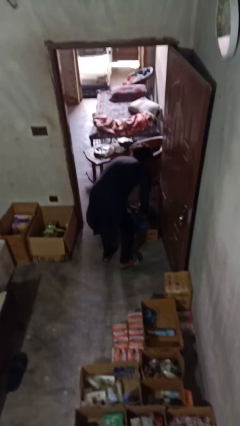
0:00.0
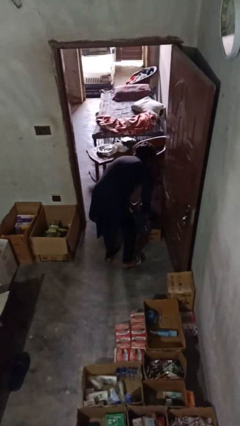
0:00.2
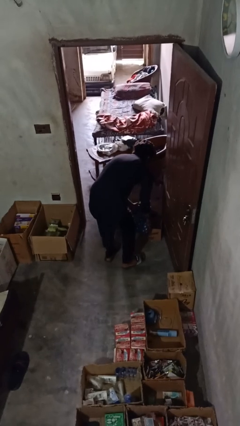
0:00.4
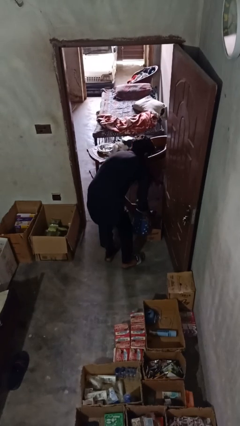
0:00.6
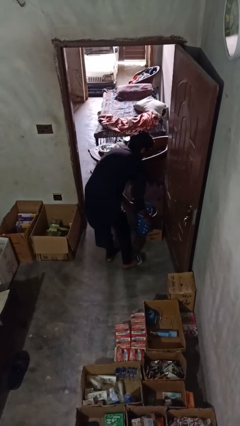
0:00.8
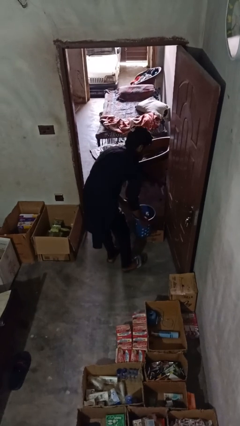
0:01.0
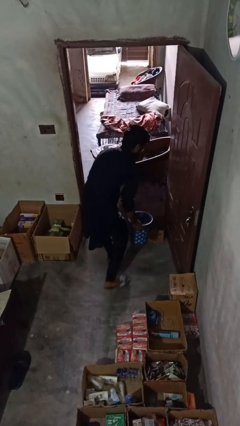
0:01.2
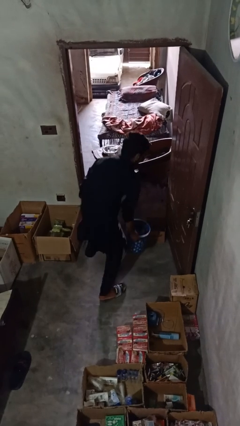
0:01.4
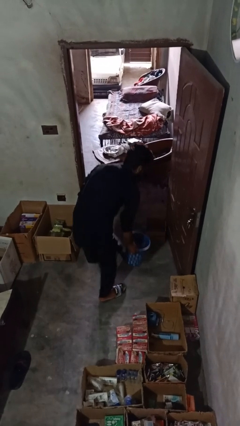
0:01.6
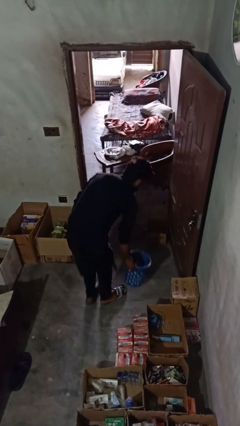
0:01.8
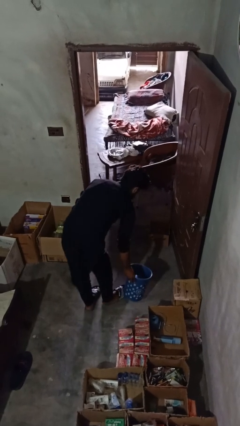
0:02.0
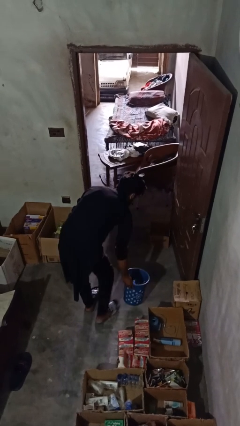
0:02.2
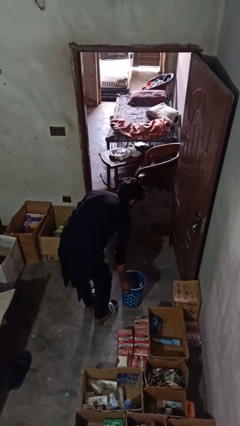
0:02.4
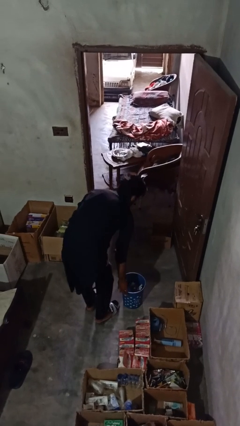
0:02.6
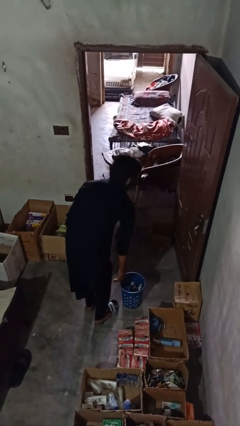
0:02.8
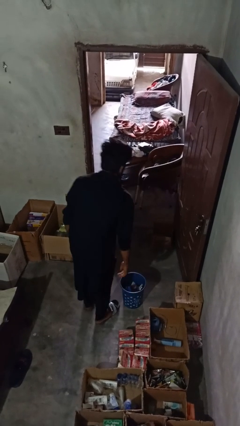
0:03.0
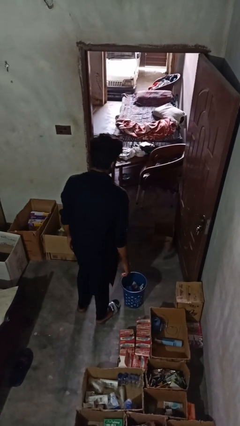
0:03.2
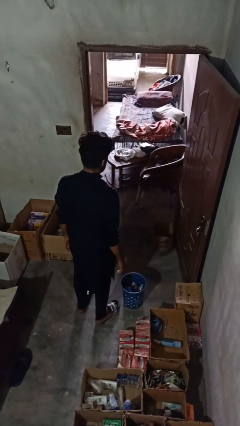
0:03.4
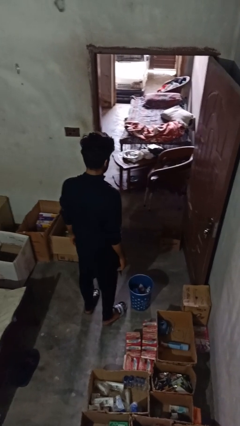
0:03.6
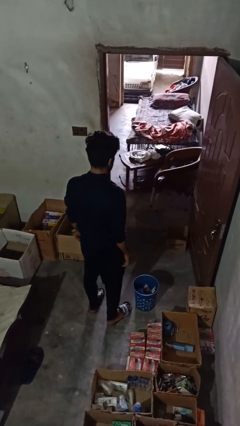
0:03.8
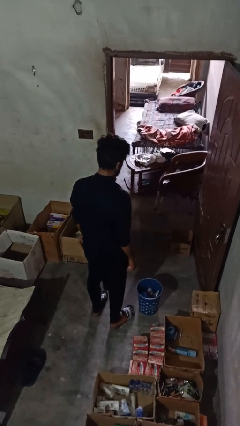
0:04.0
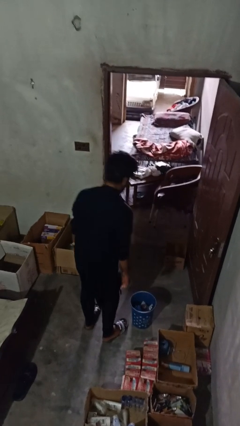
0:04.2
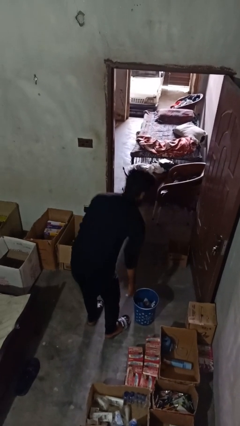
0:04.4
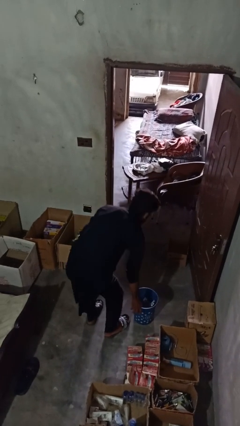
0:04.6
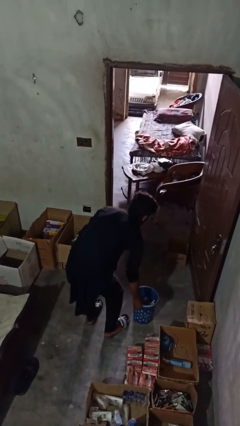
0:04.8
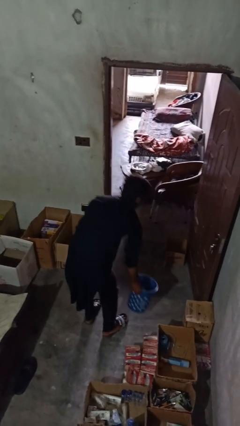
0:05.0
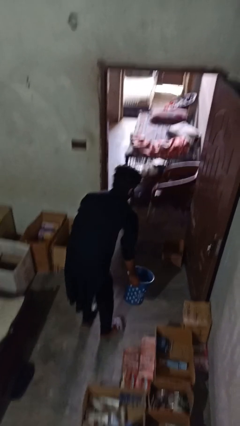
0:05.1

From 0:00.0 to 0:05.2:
person inserts trashbag into trashcan

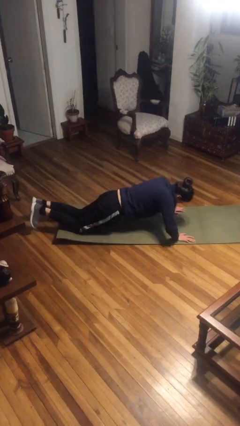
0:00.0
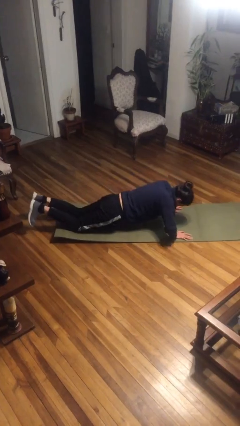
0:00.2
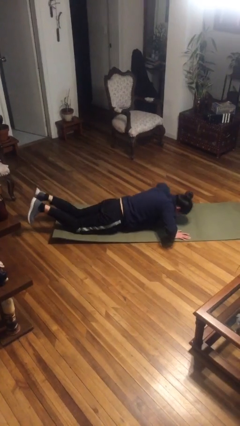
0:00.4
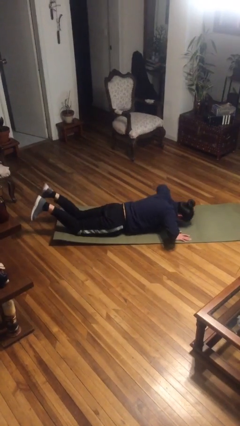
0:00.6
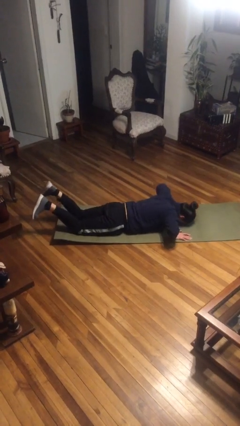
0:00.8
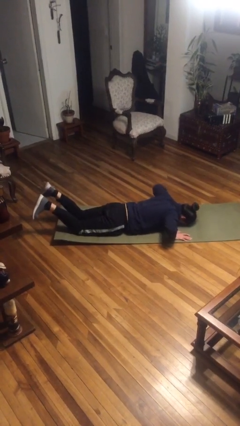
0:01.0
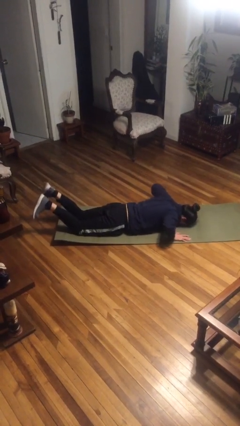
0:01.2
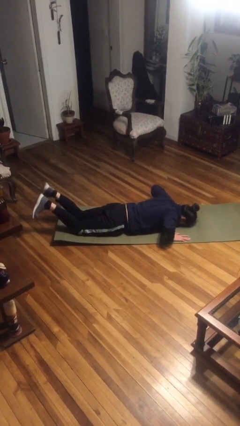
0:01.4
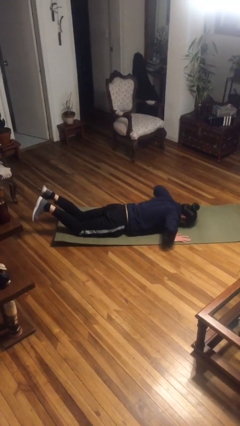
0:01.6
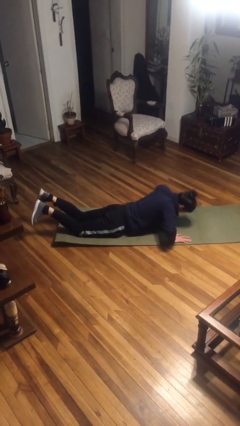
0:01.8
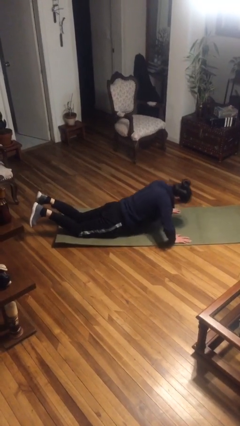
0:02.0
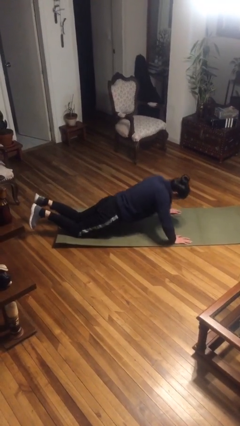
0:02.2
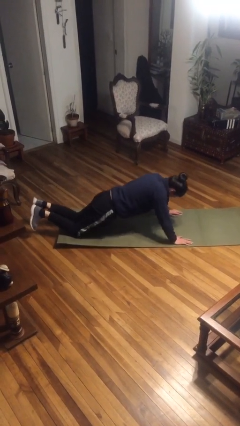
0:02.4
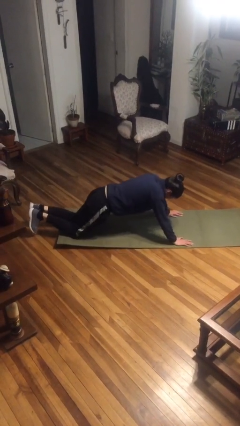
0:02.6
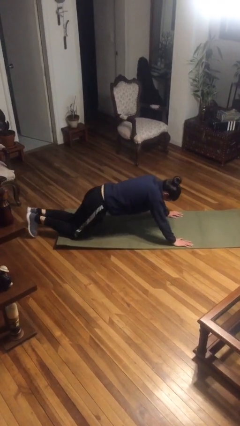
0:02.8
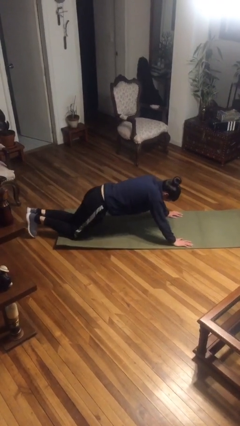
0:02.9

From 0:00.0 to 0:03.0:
person exercises with pushup

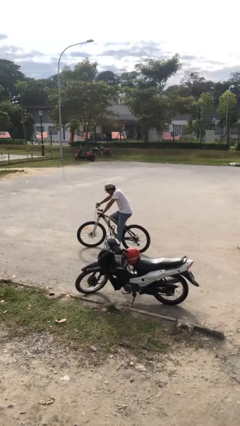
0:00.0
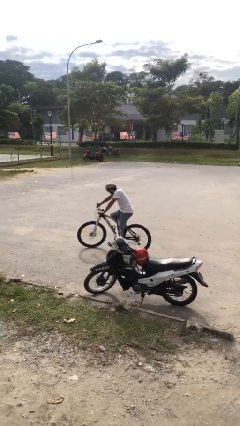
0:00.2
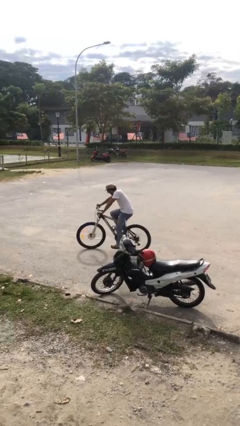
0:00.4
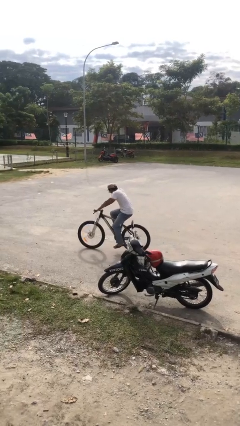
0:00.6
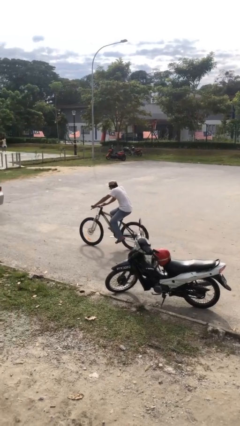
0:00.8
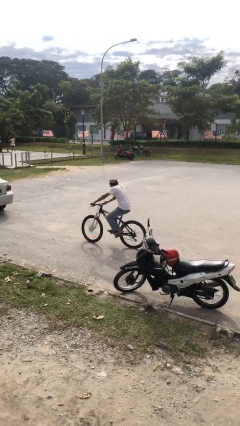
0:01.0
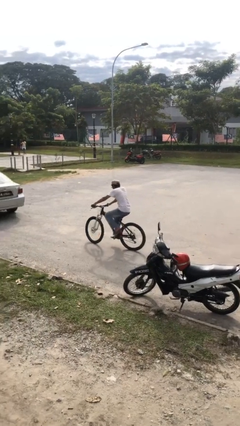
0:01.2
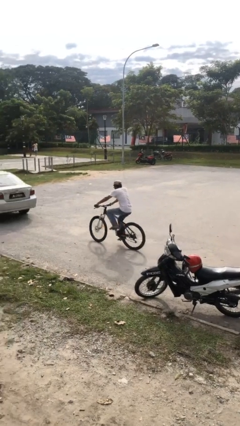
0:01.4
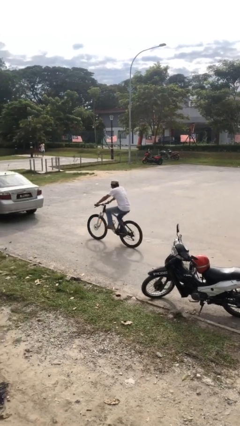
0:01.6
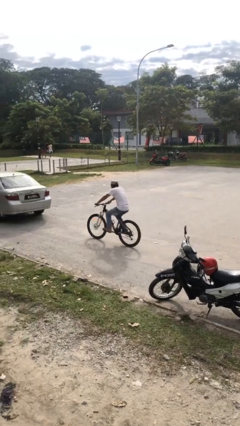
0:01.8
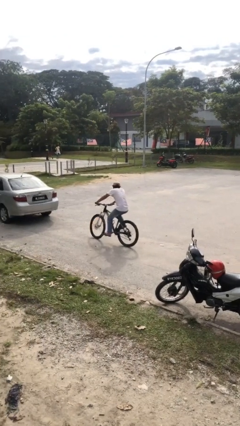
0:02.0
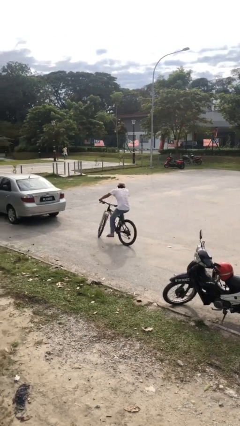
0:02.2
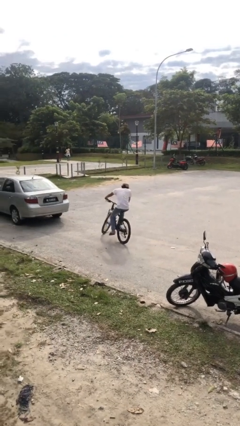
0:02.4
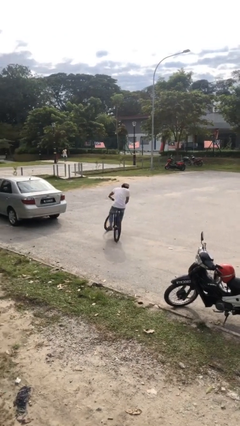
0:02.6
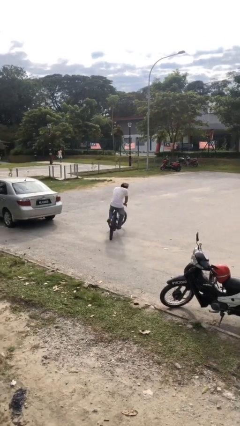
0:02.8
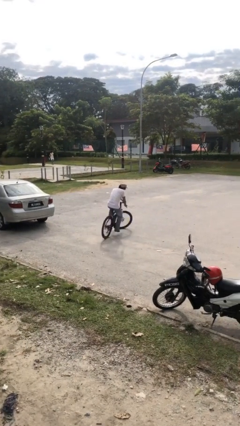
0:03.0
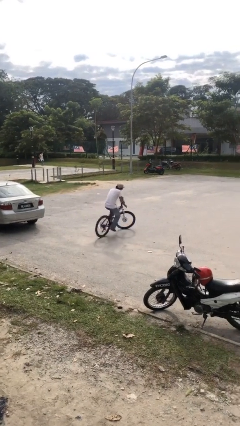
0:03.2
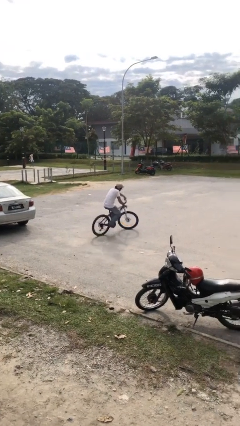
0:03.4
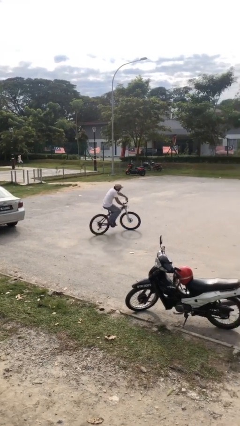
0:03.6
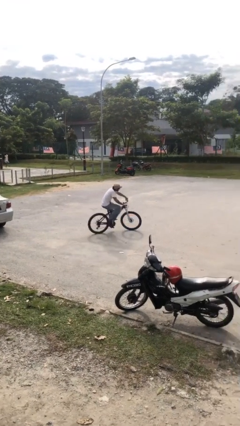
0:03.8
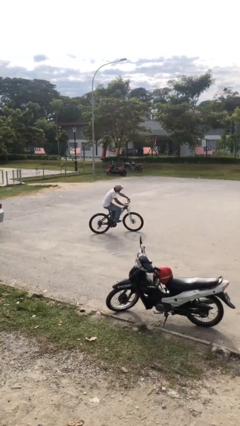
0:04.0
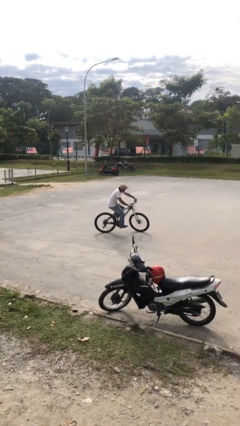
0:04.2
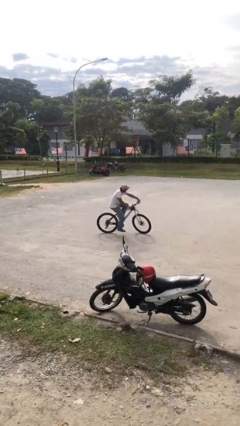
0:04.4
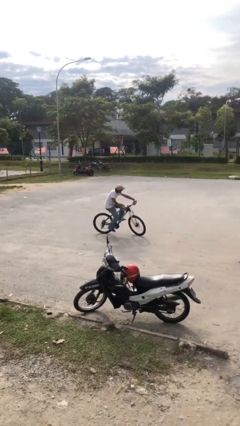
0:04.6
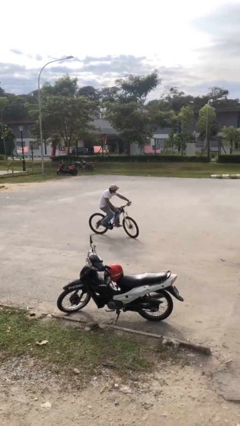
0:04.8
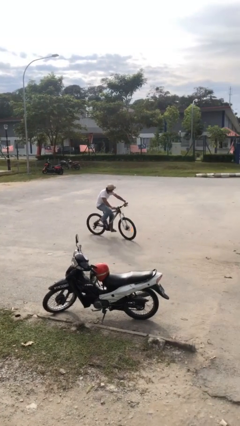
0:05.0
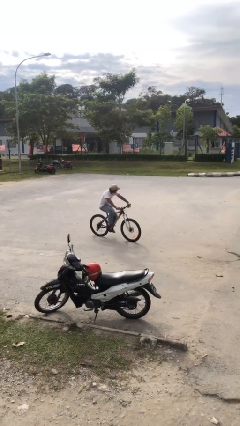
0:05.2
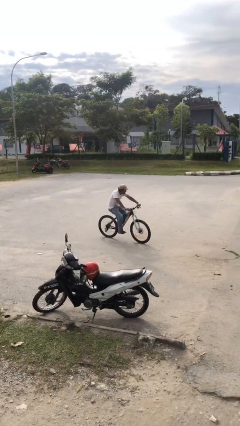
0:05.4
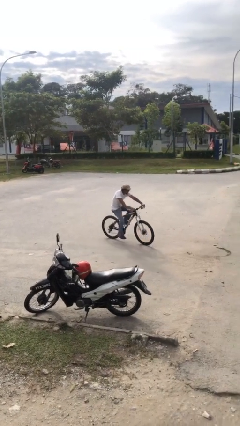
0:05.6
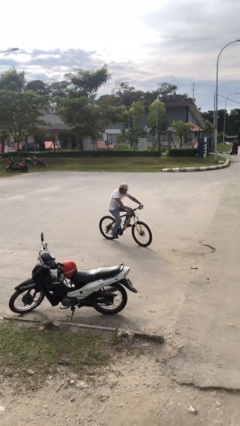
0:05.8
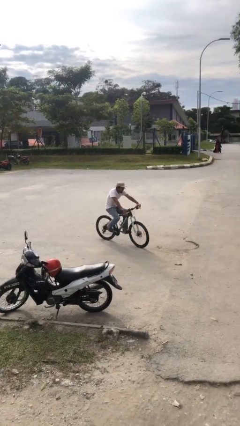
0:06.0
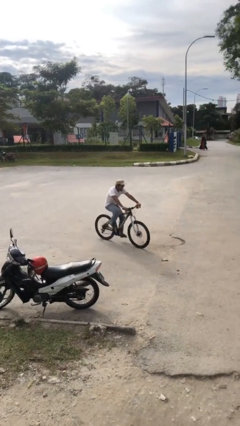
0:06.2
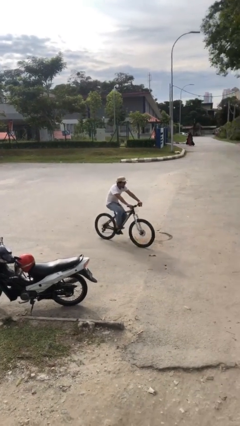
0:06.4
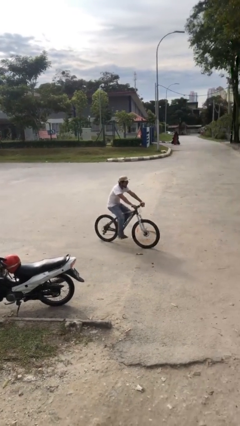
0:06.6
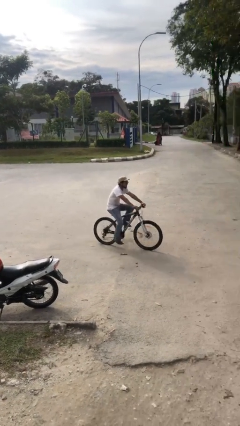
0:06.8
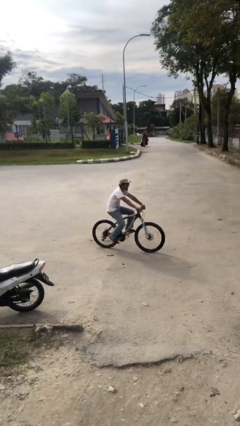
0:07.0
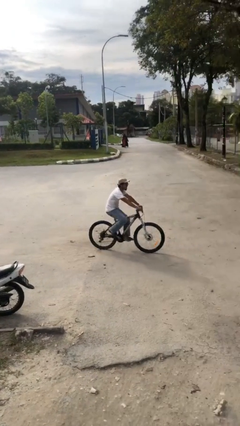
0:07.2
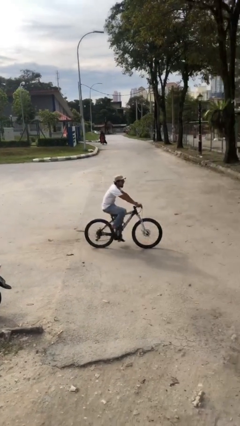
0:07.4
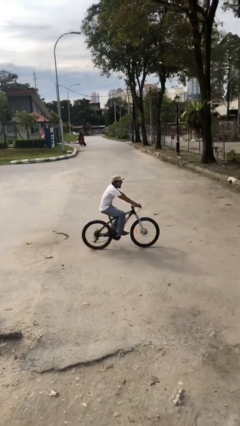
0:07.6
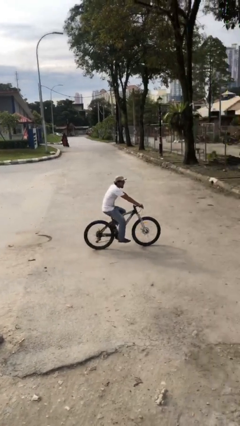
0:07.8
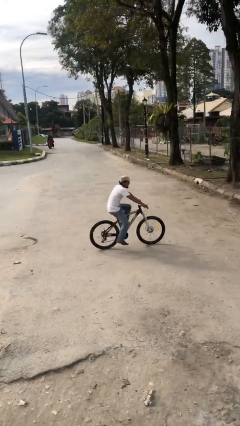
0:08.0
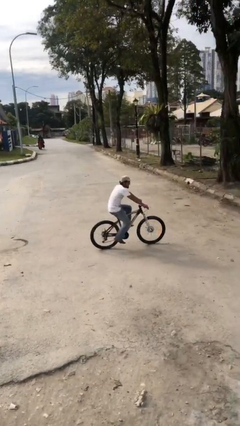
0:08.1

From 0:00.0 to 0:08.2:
person rides bicycle

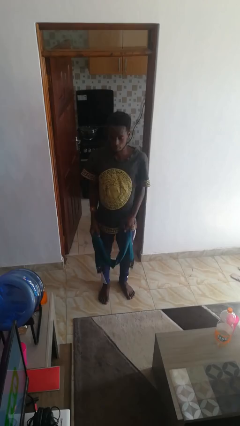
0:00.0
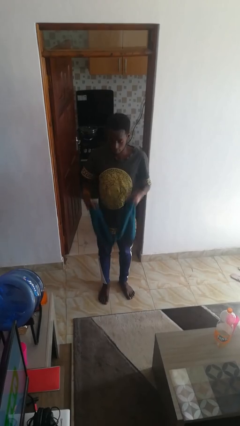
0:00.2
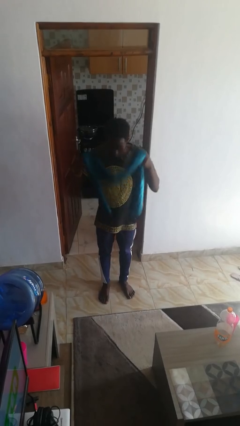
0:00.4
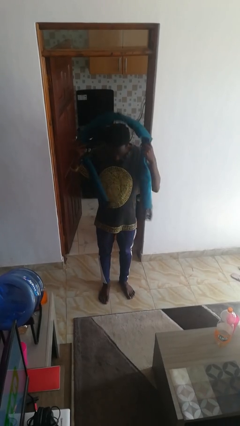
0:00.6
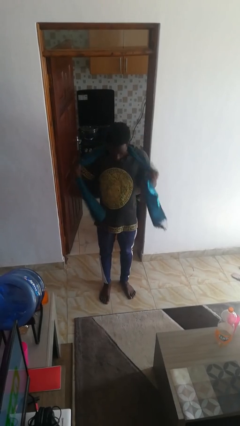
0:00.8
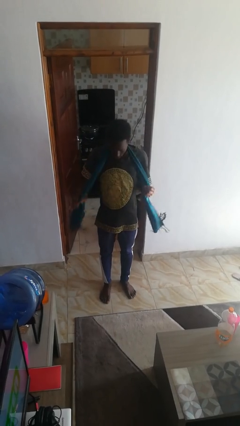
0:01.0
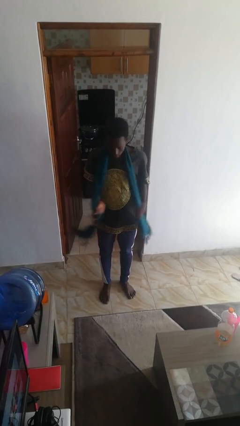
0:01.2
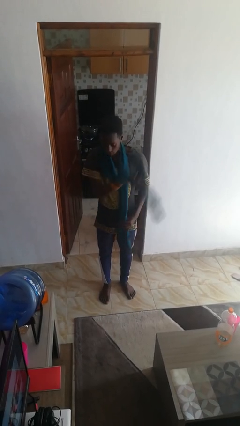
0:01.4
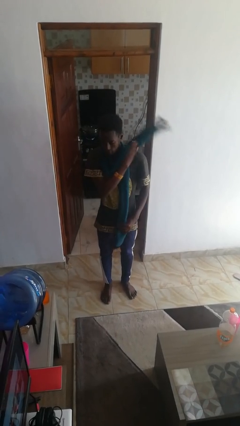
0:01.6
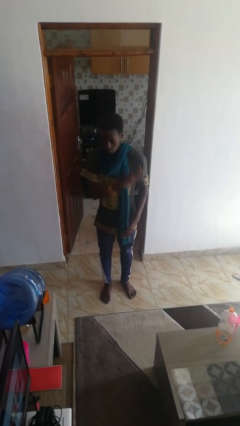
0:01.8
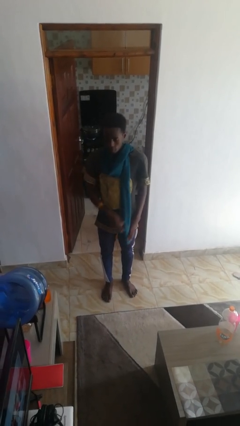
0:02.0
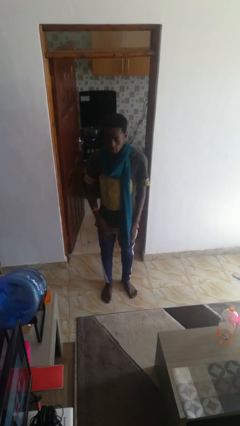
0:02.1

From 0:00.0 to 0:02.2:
person puts on scarf
